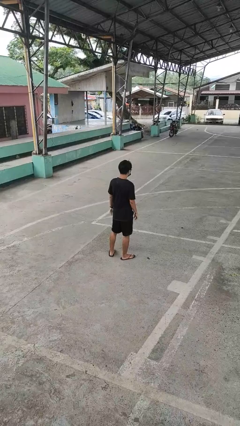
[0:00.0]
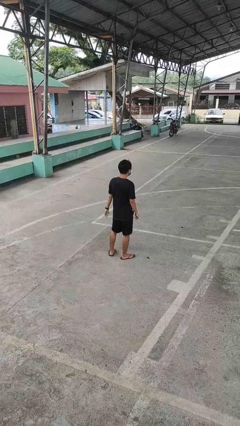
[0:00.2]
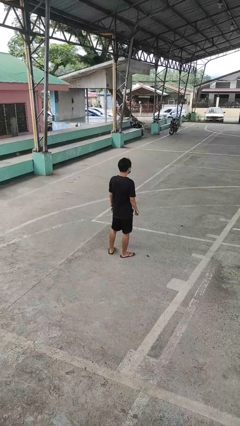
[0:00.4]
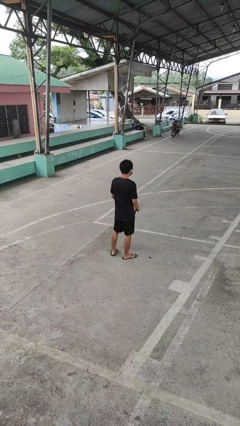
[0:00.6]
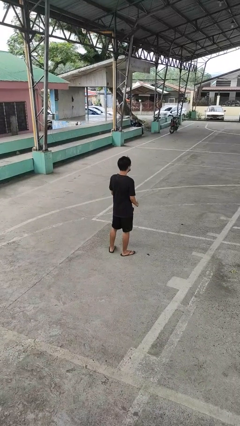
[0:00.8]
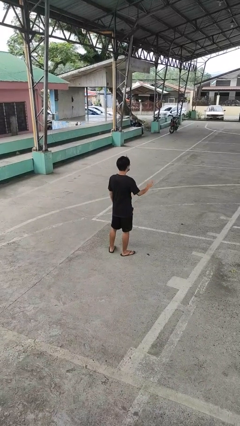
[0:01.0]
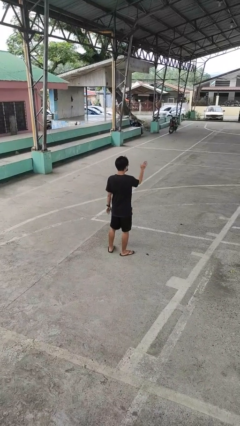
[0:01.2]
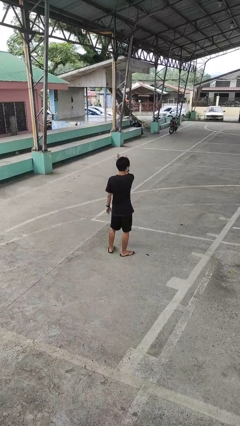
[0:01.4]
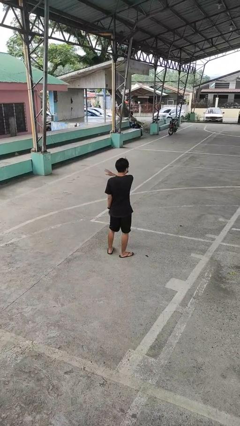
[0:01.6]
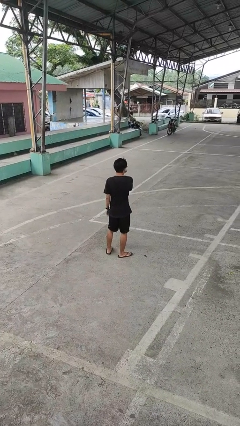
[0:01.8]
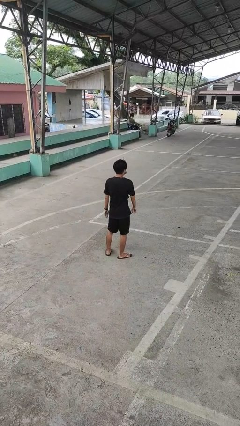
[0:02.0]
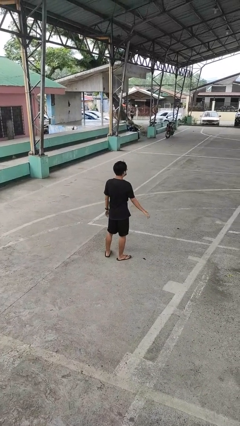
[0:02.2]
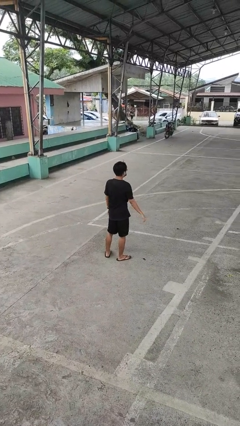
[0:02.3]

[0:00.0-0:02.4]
person gestures swipe left

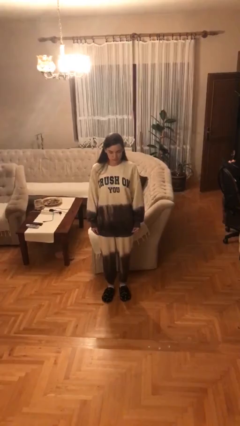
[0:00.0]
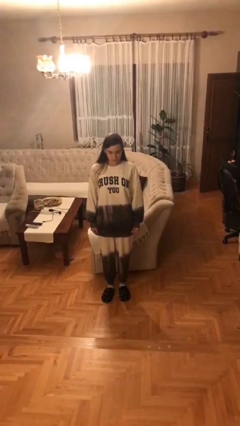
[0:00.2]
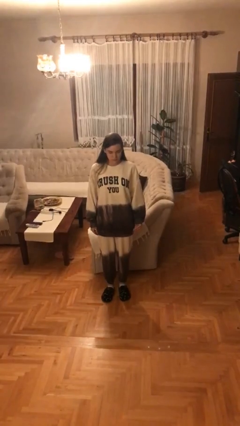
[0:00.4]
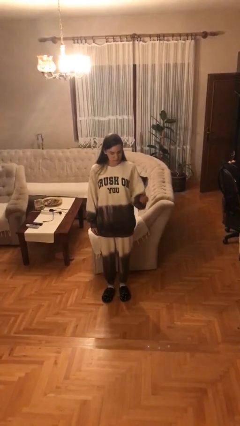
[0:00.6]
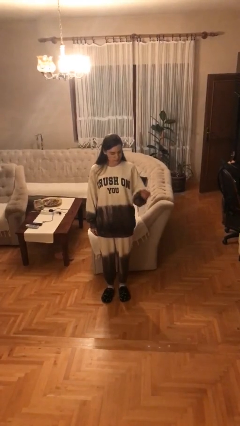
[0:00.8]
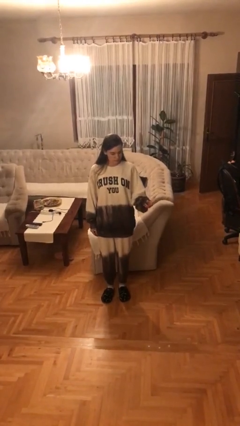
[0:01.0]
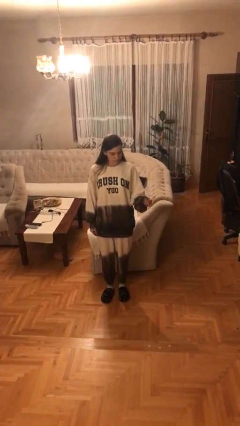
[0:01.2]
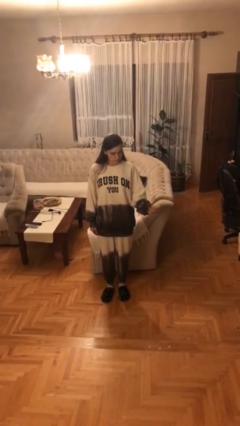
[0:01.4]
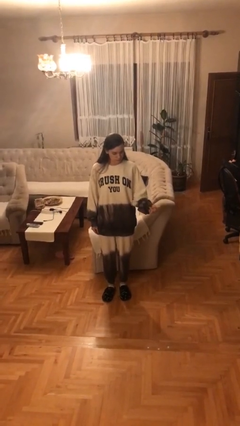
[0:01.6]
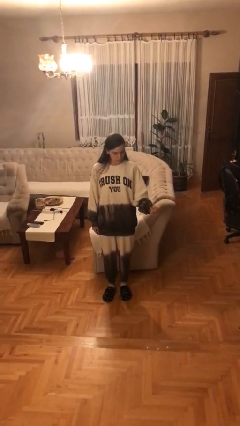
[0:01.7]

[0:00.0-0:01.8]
person snaps fingers

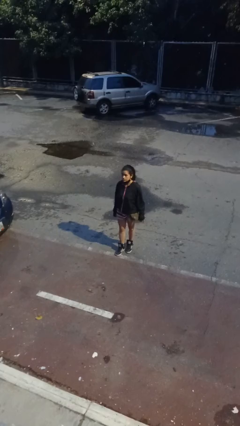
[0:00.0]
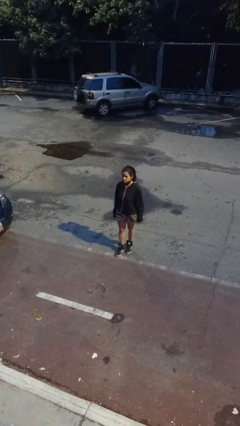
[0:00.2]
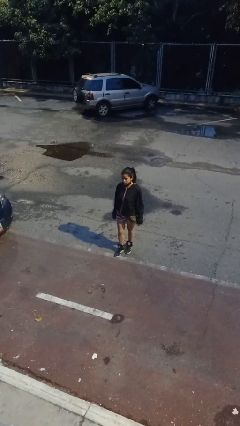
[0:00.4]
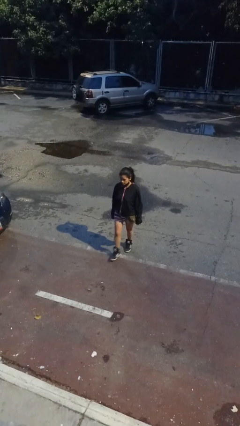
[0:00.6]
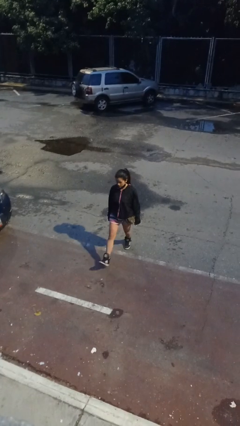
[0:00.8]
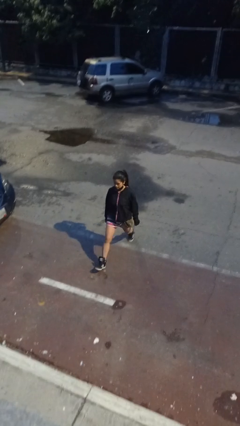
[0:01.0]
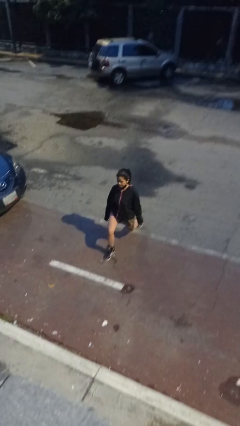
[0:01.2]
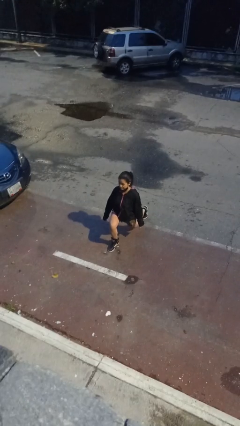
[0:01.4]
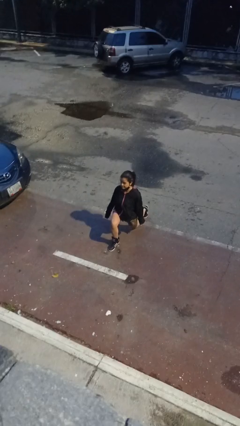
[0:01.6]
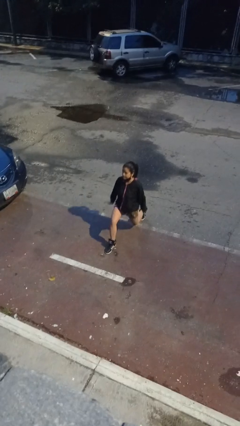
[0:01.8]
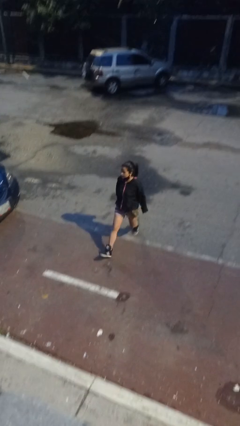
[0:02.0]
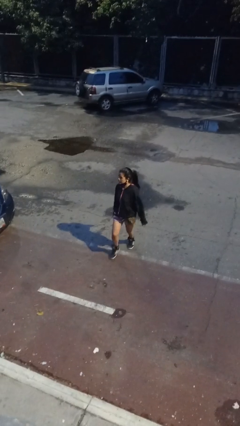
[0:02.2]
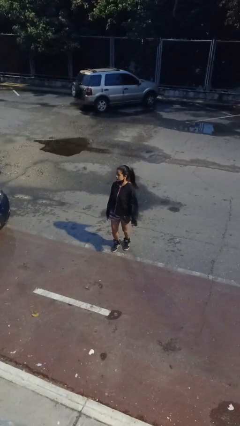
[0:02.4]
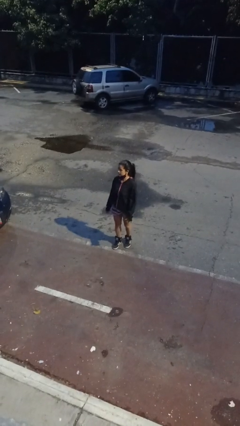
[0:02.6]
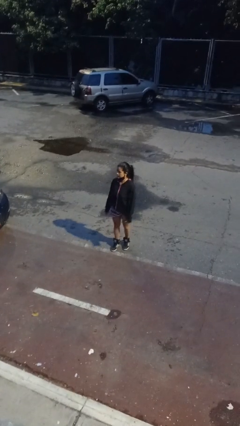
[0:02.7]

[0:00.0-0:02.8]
person exercises with lunges

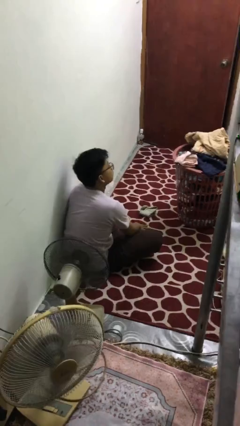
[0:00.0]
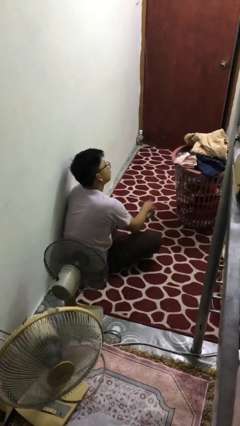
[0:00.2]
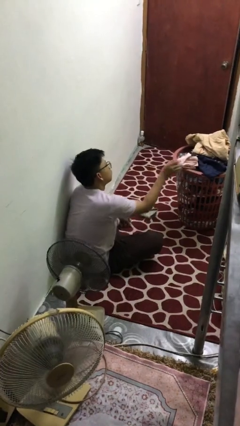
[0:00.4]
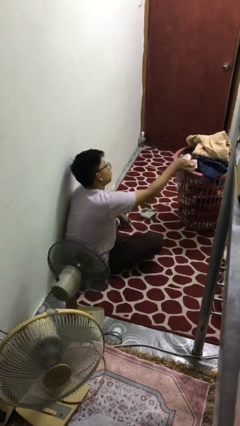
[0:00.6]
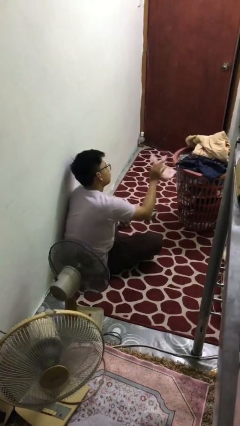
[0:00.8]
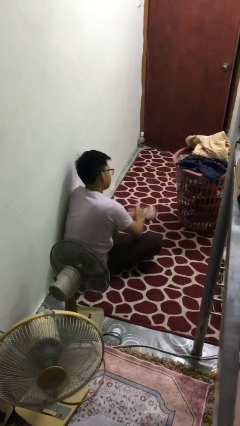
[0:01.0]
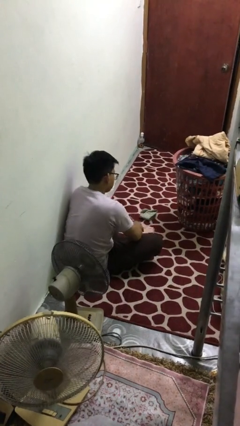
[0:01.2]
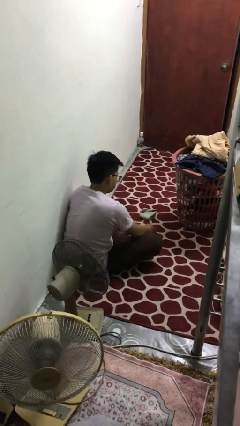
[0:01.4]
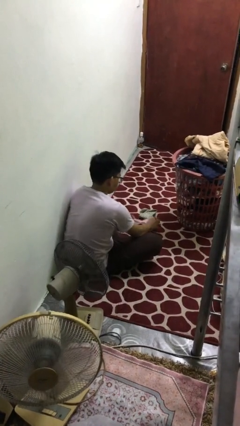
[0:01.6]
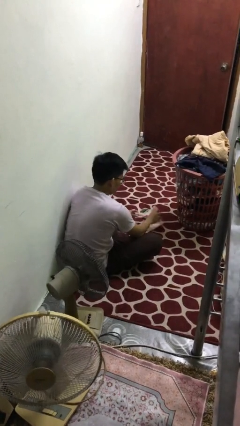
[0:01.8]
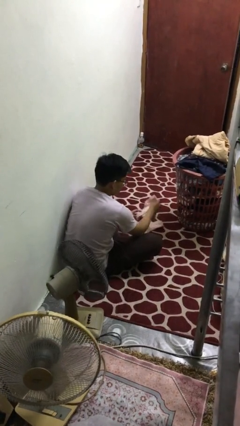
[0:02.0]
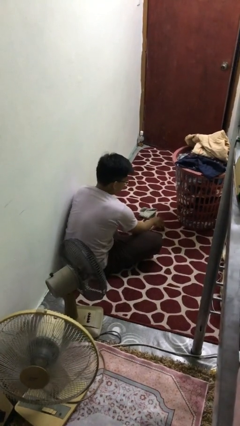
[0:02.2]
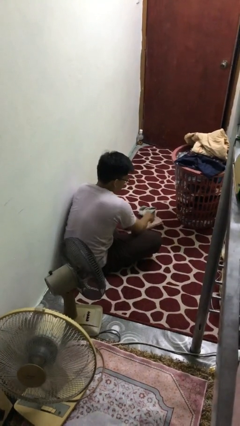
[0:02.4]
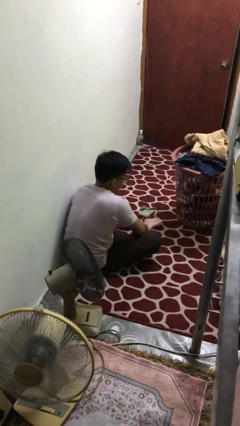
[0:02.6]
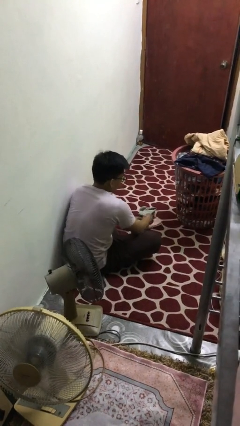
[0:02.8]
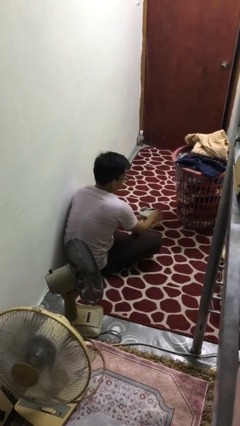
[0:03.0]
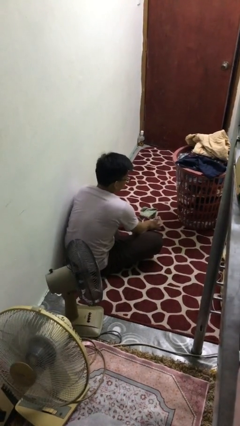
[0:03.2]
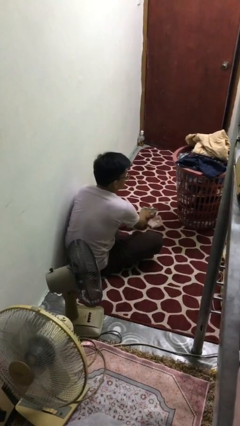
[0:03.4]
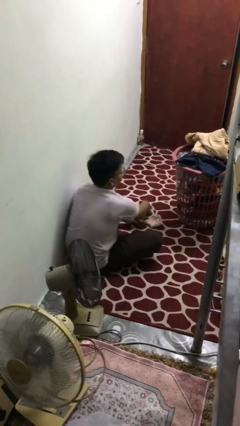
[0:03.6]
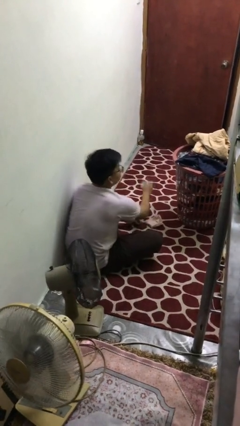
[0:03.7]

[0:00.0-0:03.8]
person folds socks

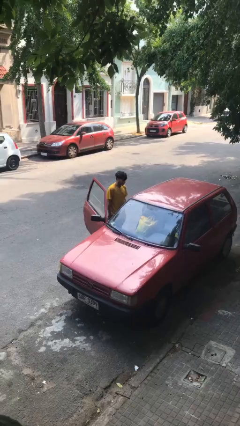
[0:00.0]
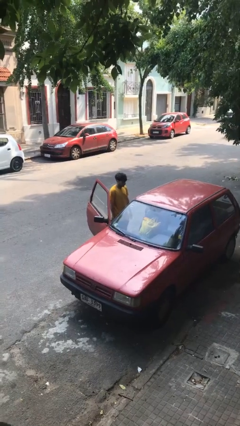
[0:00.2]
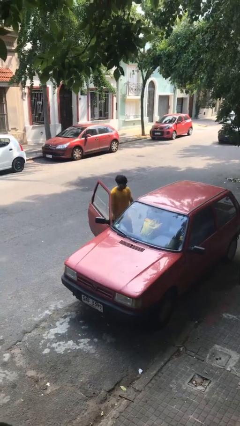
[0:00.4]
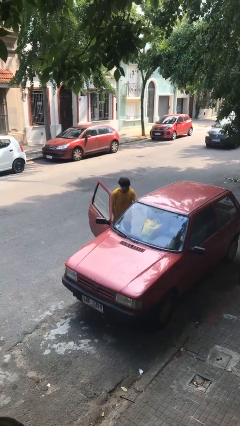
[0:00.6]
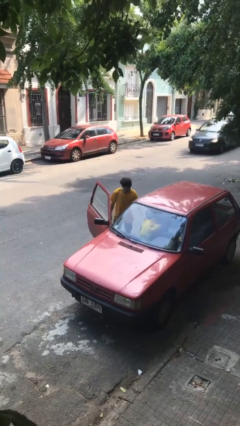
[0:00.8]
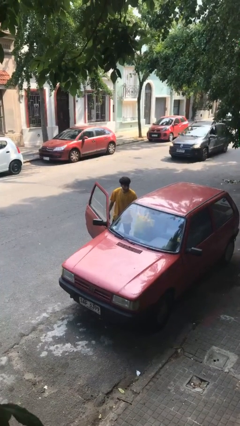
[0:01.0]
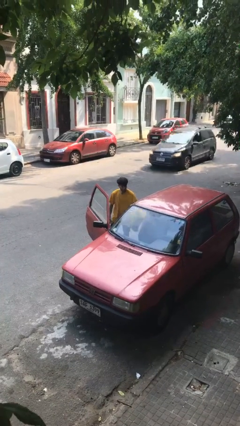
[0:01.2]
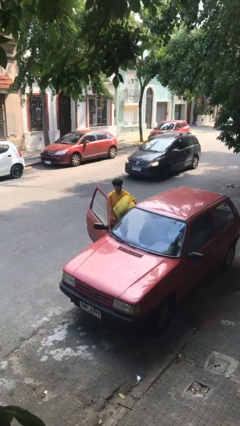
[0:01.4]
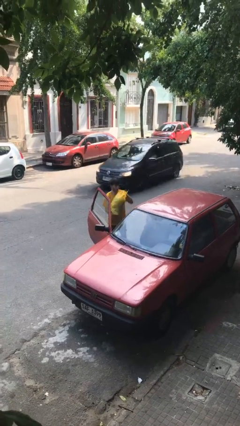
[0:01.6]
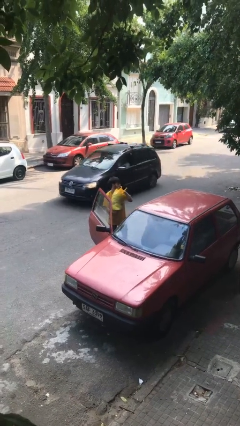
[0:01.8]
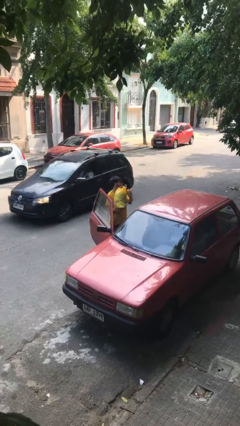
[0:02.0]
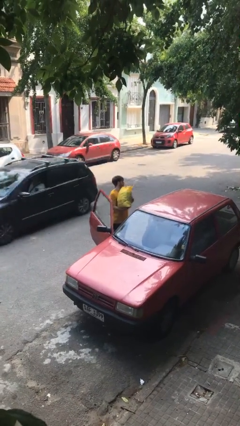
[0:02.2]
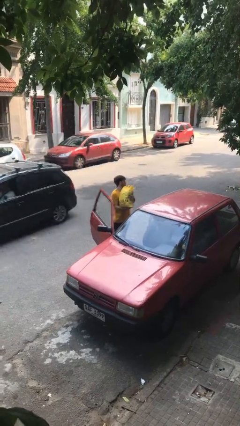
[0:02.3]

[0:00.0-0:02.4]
person unloads car

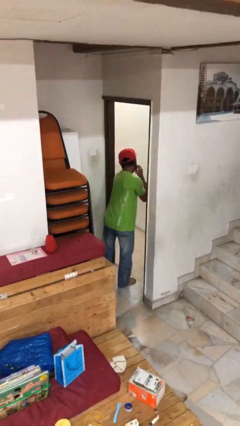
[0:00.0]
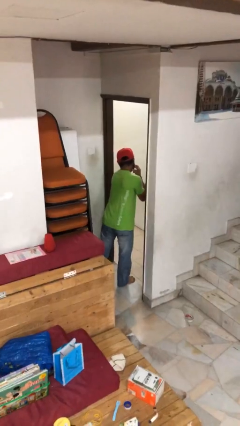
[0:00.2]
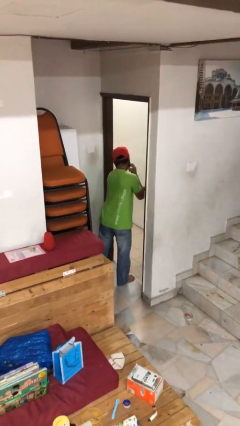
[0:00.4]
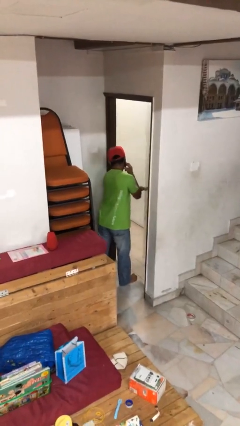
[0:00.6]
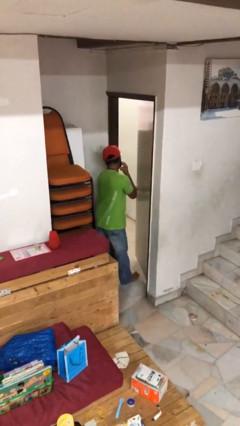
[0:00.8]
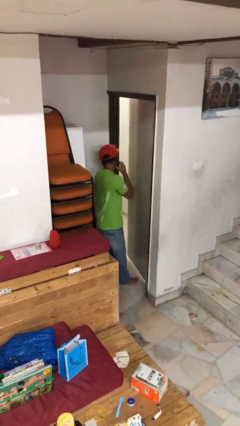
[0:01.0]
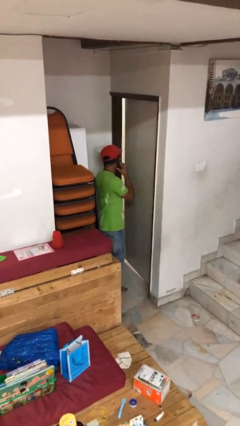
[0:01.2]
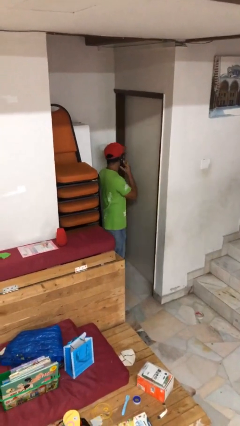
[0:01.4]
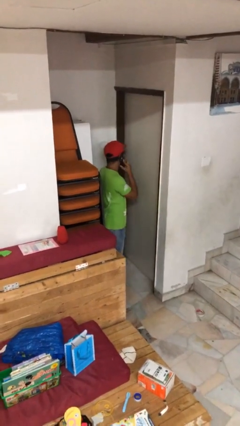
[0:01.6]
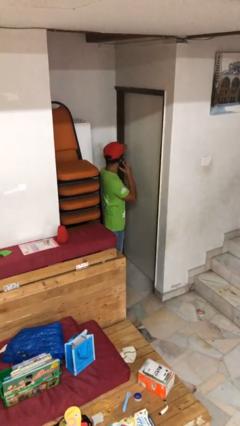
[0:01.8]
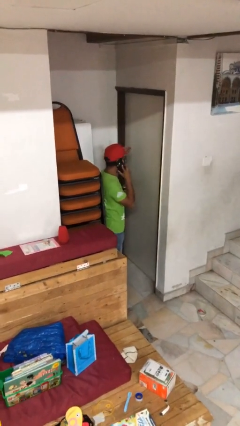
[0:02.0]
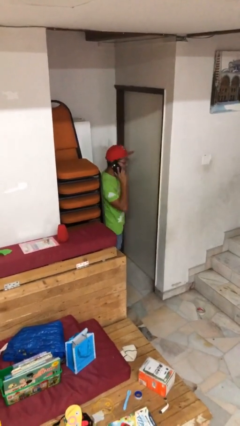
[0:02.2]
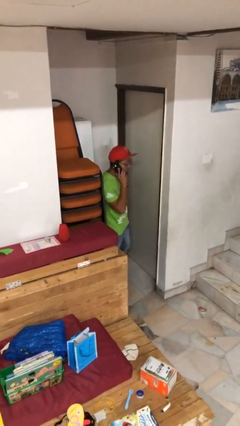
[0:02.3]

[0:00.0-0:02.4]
person closes facility door

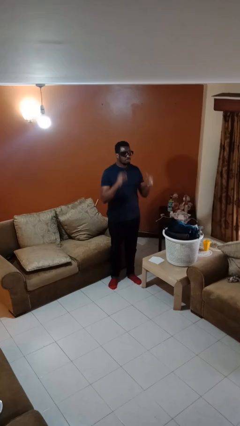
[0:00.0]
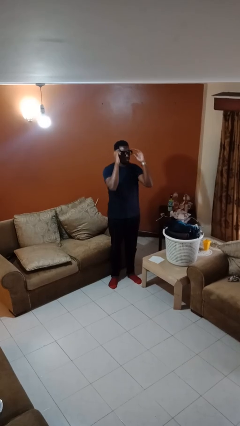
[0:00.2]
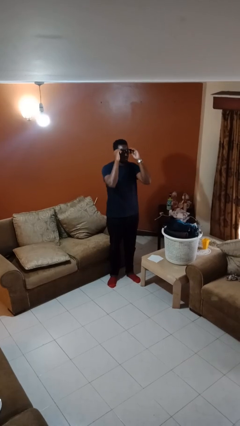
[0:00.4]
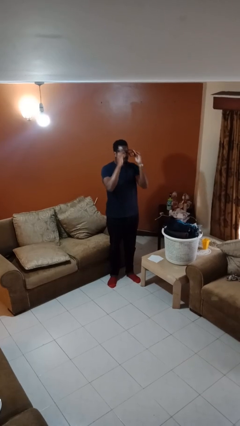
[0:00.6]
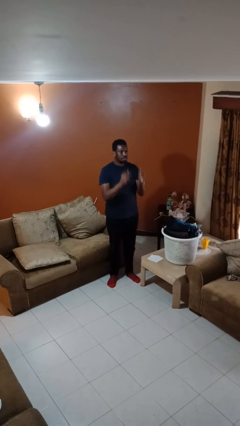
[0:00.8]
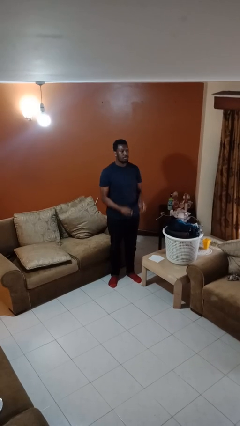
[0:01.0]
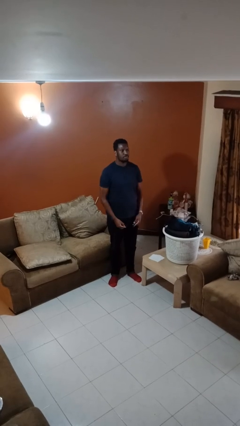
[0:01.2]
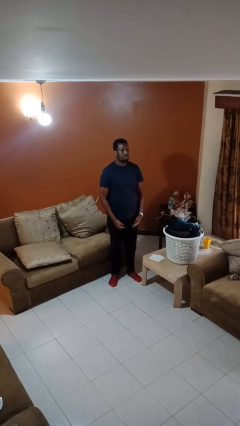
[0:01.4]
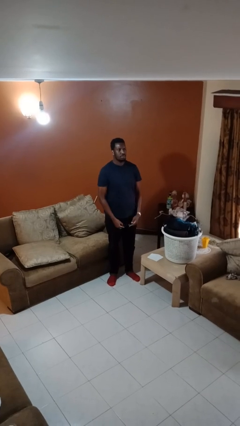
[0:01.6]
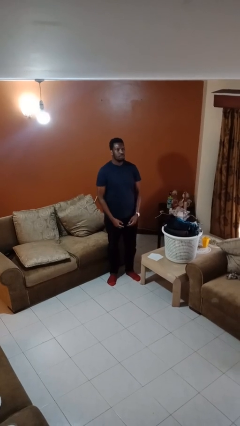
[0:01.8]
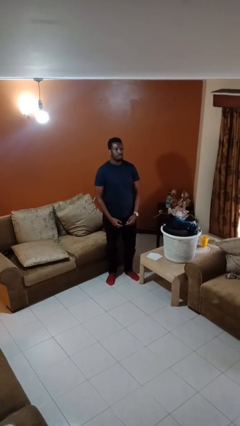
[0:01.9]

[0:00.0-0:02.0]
person takes off glasses
